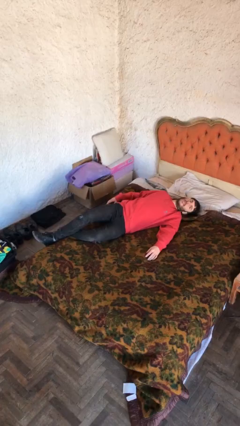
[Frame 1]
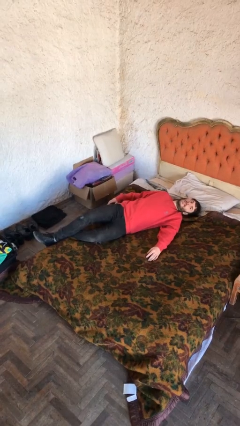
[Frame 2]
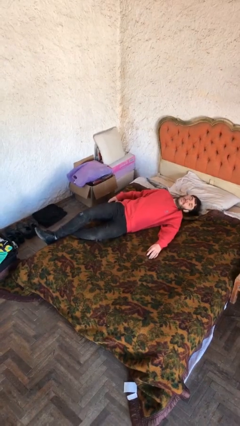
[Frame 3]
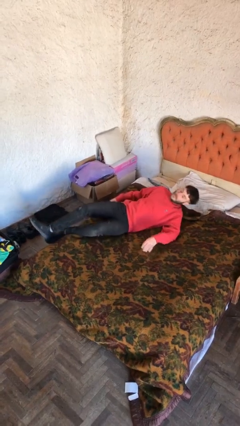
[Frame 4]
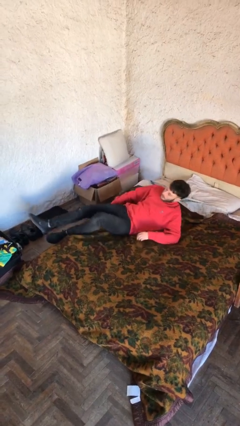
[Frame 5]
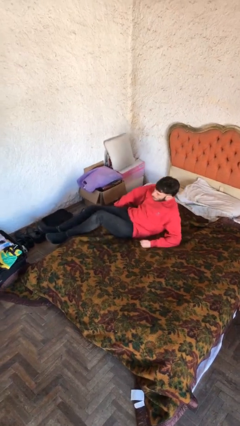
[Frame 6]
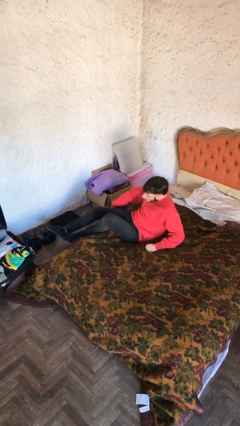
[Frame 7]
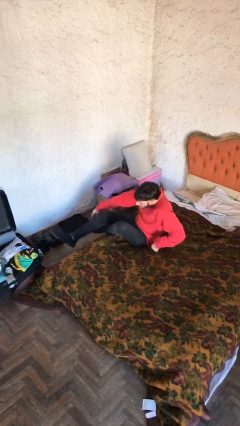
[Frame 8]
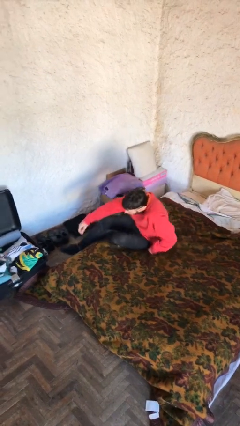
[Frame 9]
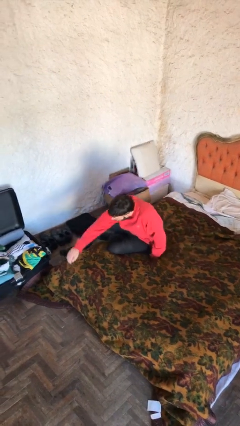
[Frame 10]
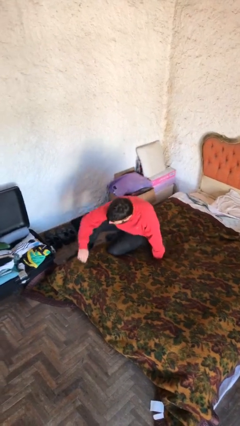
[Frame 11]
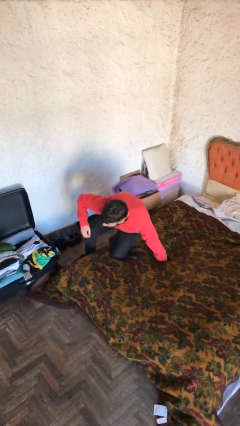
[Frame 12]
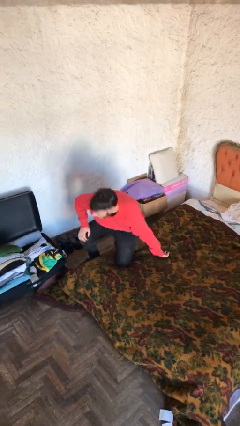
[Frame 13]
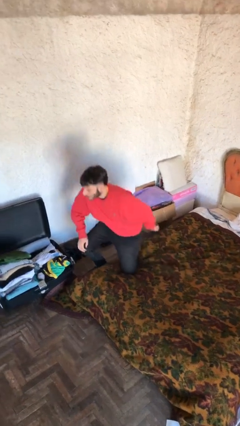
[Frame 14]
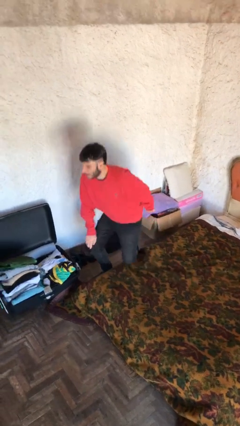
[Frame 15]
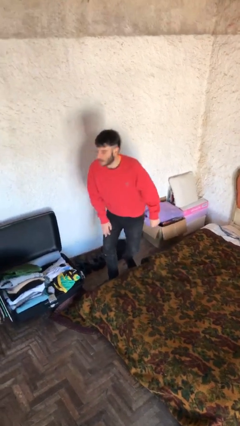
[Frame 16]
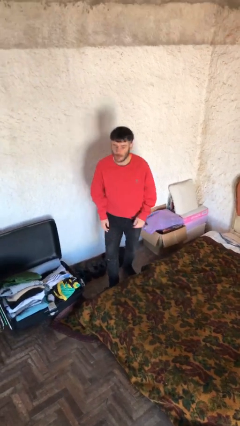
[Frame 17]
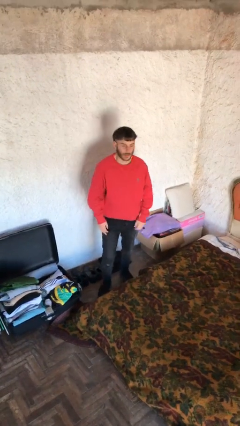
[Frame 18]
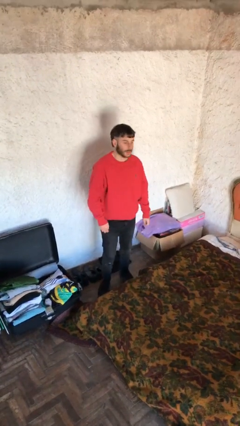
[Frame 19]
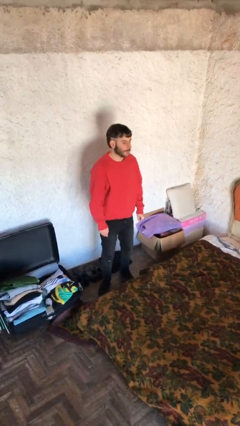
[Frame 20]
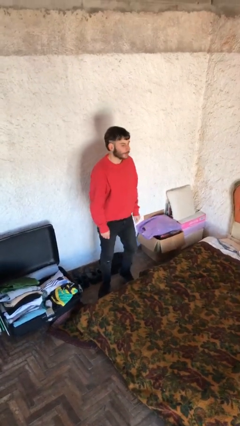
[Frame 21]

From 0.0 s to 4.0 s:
person stands up

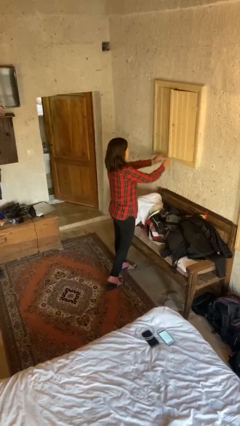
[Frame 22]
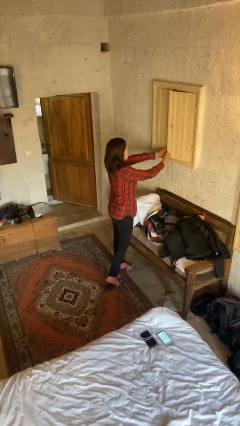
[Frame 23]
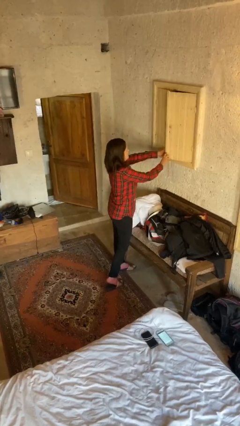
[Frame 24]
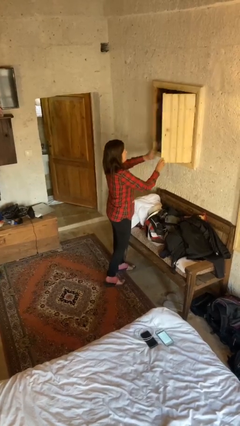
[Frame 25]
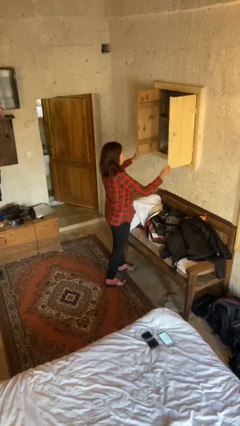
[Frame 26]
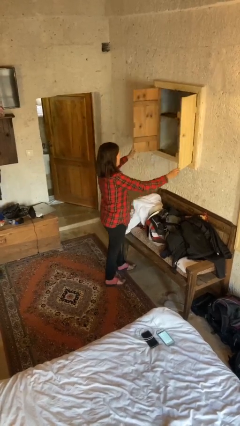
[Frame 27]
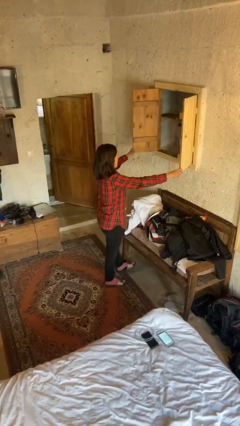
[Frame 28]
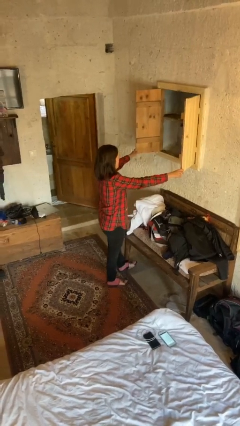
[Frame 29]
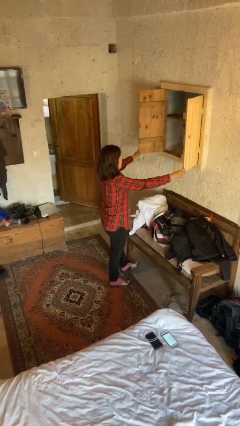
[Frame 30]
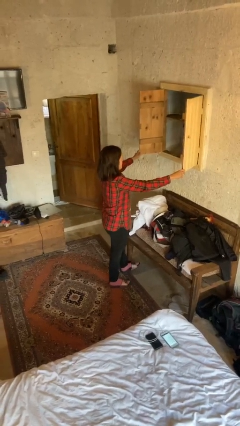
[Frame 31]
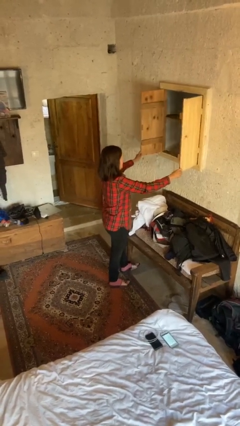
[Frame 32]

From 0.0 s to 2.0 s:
person opens closet door

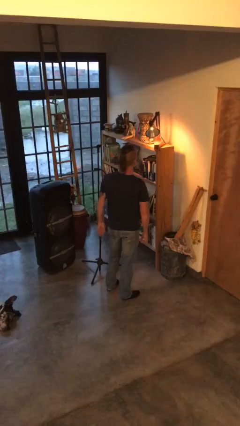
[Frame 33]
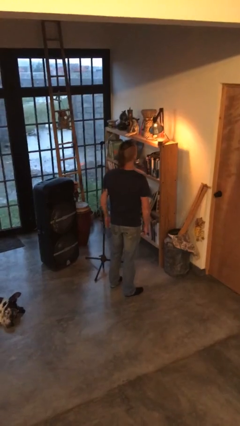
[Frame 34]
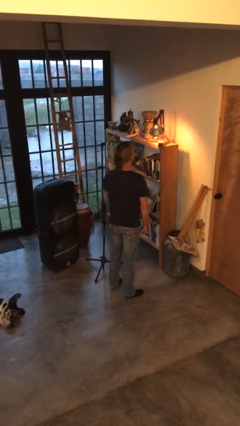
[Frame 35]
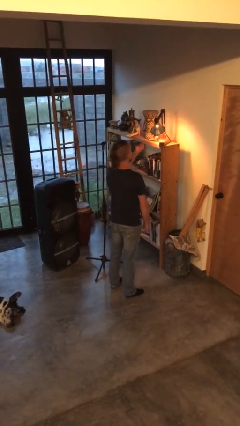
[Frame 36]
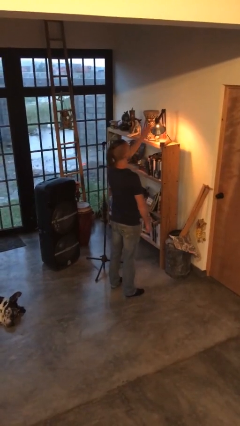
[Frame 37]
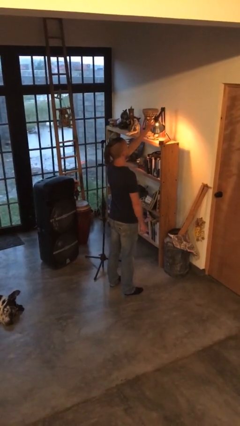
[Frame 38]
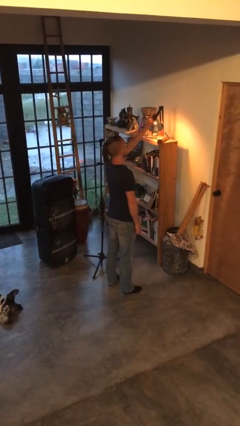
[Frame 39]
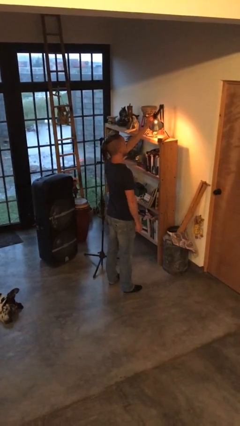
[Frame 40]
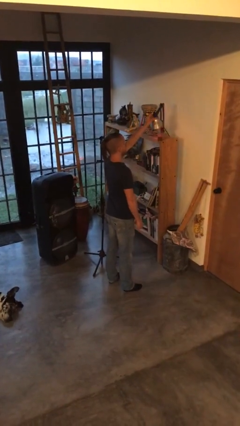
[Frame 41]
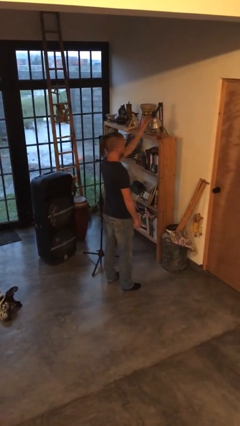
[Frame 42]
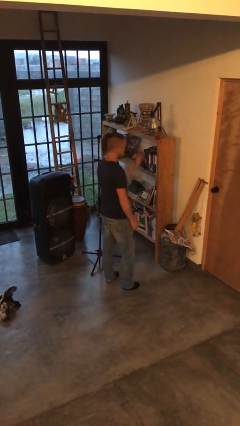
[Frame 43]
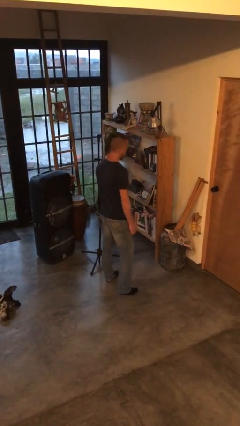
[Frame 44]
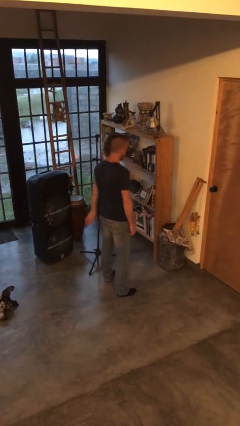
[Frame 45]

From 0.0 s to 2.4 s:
person turns off lamp

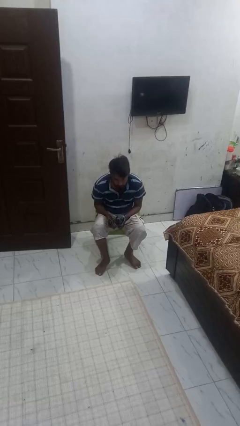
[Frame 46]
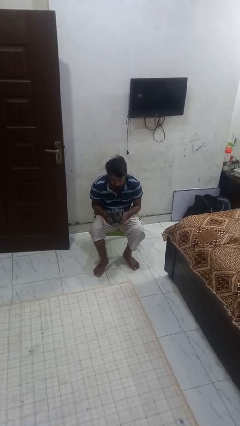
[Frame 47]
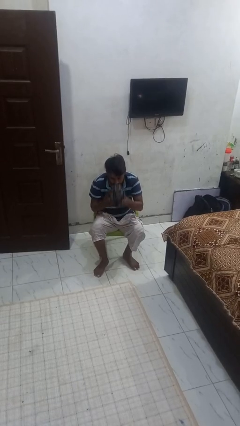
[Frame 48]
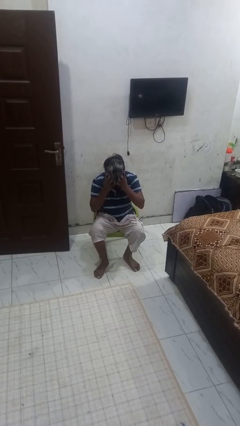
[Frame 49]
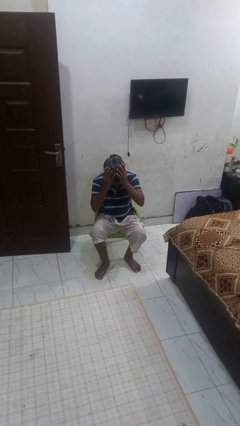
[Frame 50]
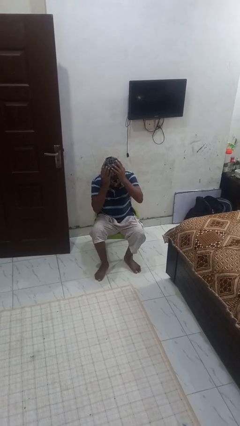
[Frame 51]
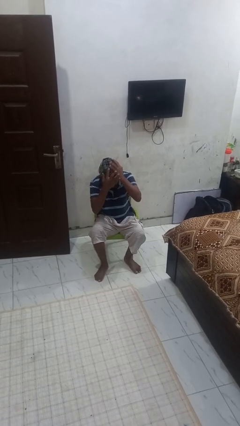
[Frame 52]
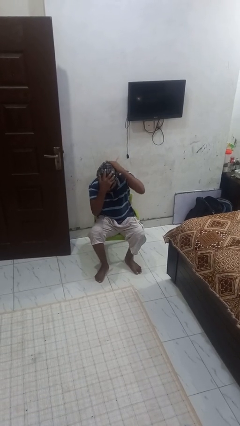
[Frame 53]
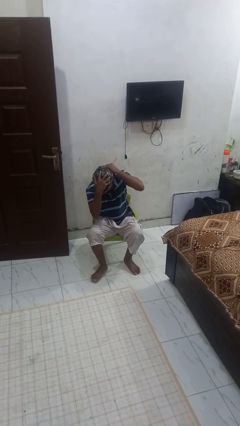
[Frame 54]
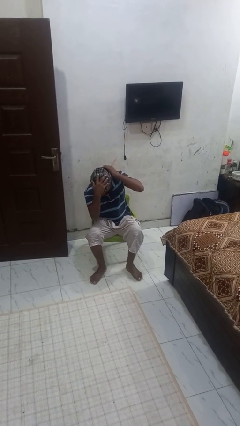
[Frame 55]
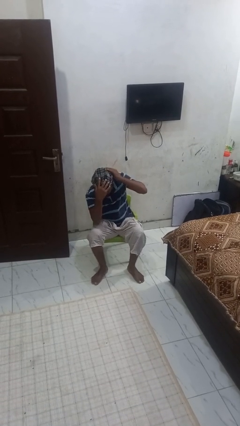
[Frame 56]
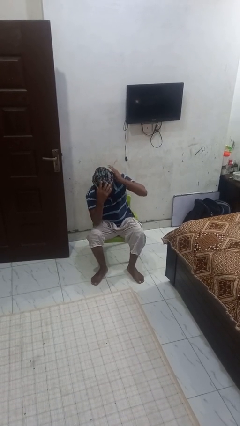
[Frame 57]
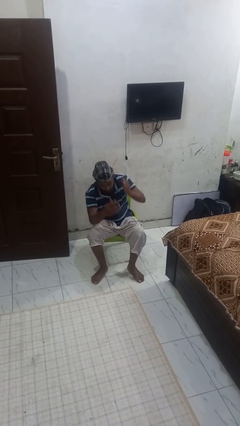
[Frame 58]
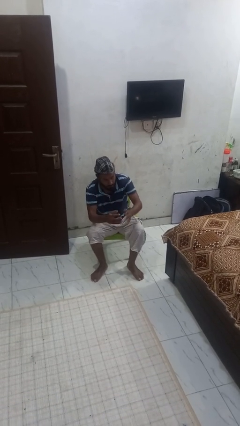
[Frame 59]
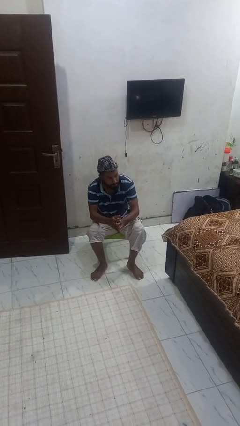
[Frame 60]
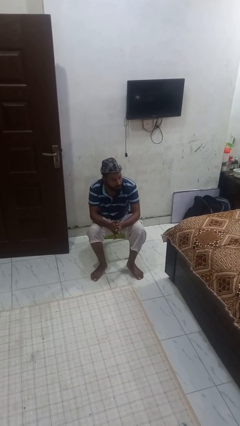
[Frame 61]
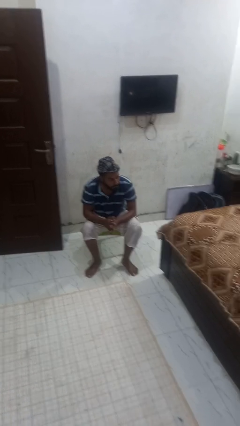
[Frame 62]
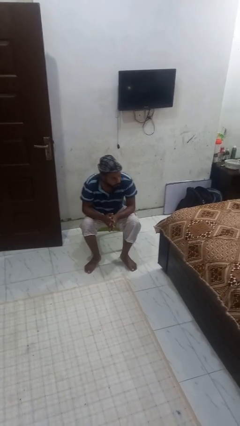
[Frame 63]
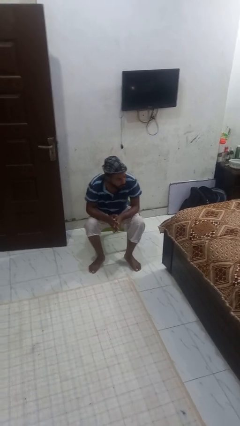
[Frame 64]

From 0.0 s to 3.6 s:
person puts on hat

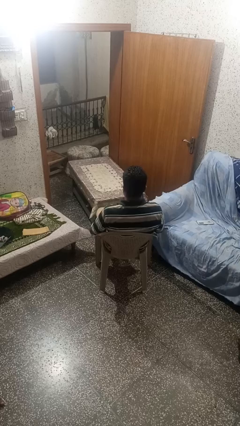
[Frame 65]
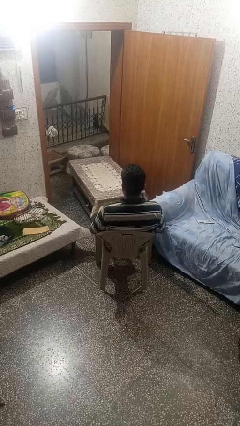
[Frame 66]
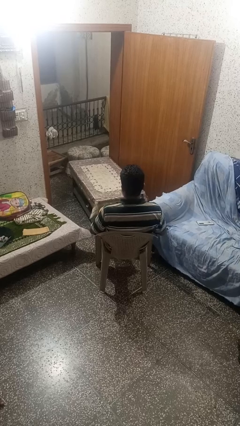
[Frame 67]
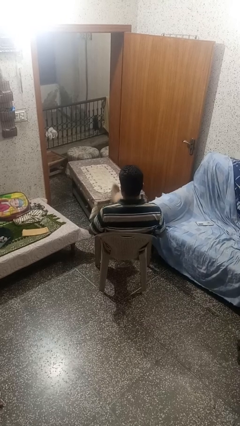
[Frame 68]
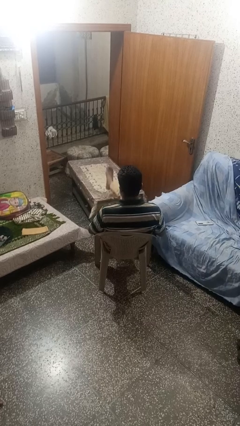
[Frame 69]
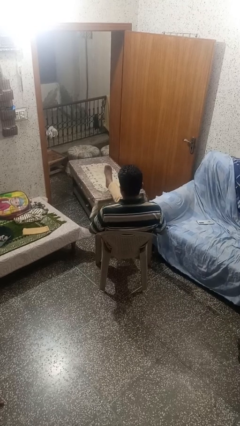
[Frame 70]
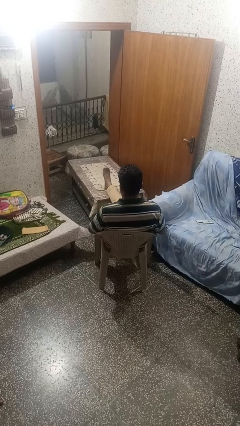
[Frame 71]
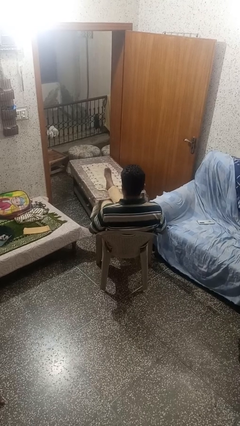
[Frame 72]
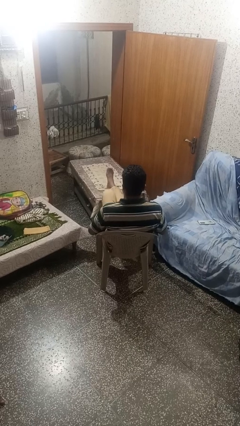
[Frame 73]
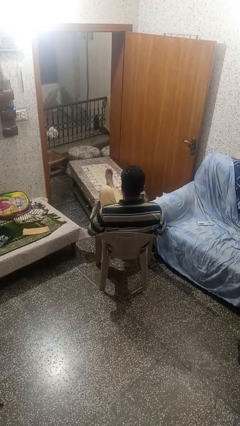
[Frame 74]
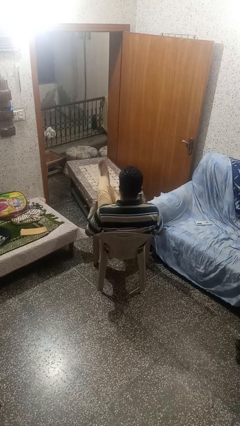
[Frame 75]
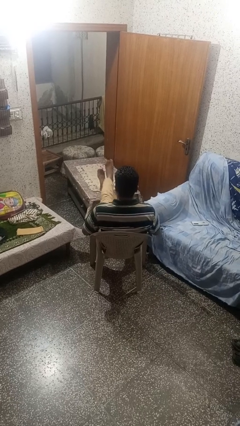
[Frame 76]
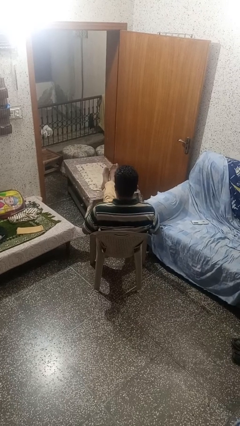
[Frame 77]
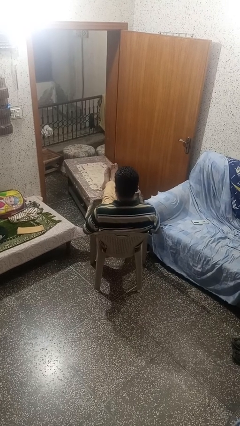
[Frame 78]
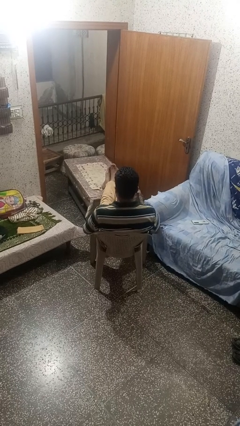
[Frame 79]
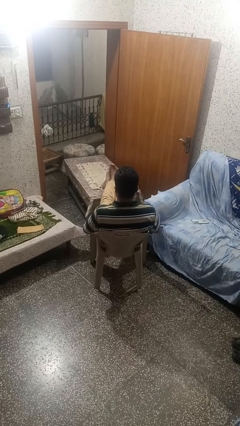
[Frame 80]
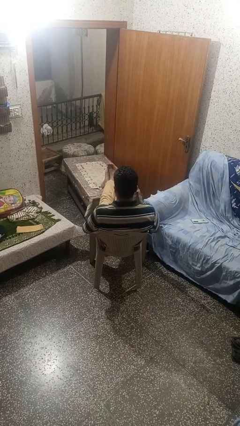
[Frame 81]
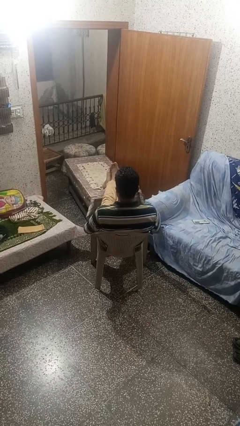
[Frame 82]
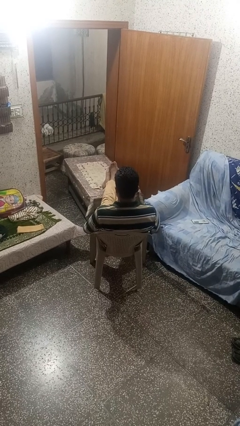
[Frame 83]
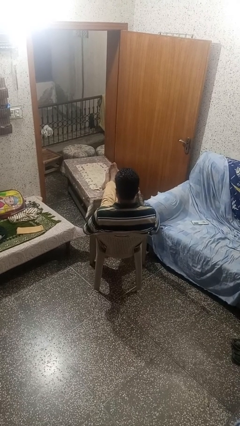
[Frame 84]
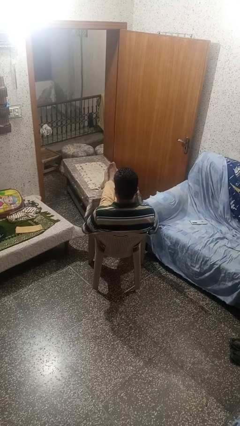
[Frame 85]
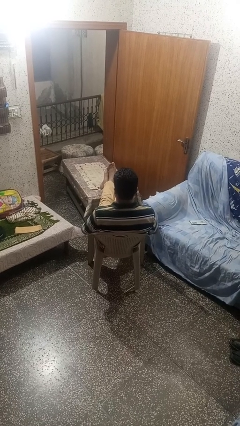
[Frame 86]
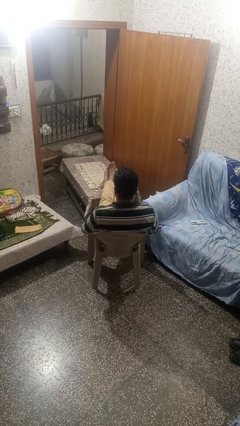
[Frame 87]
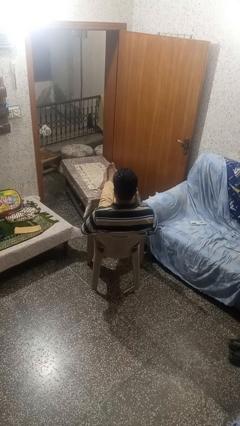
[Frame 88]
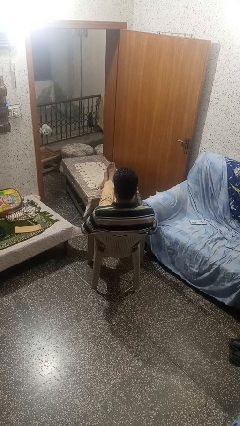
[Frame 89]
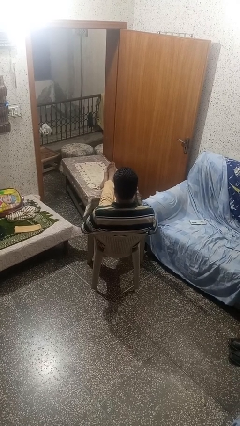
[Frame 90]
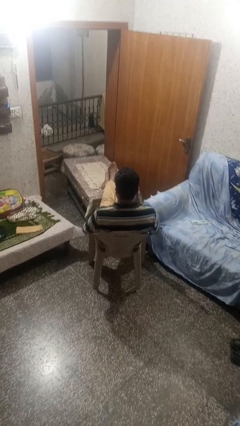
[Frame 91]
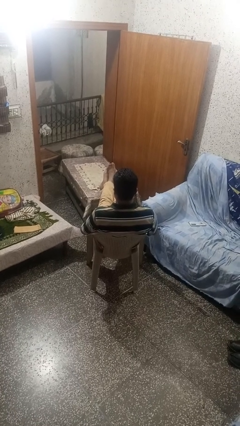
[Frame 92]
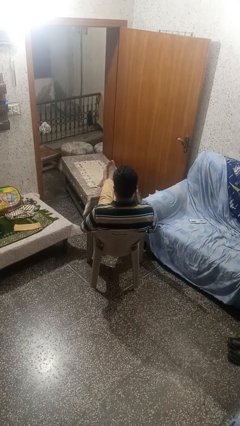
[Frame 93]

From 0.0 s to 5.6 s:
person puts feet up
